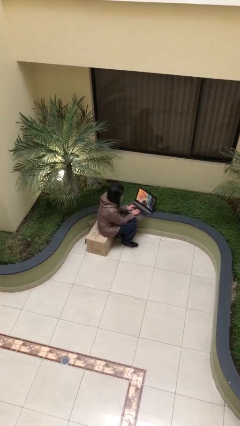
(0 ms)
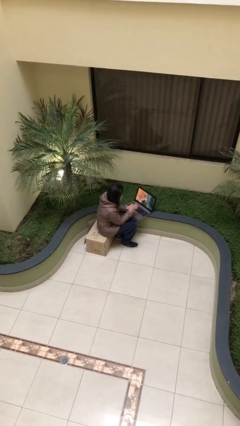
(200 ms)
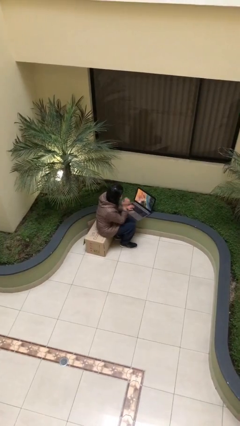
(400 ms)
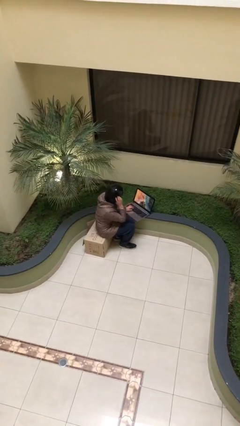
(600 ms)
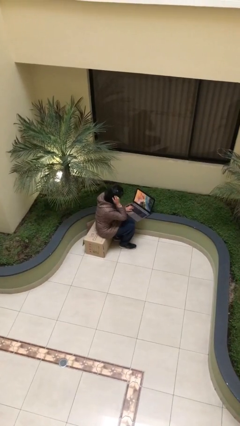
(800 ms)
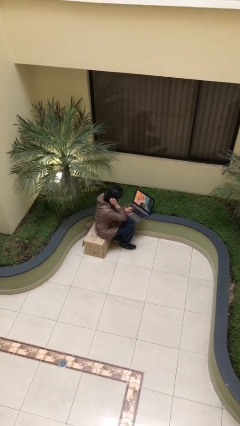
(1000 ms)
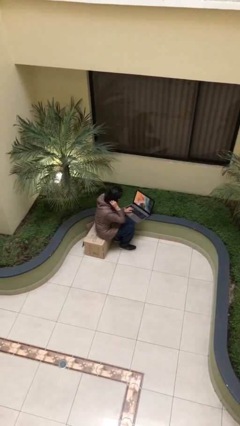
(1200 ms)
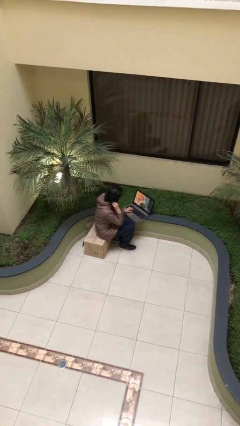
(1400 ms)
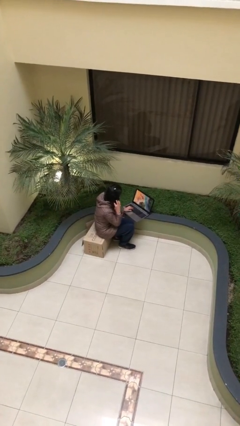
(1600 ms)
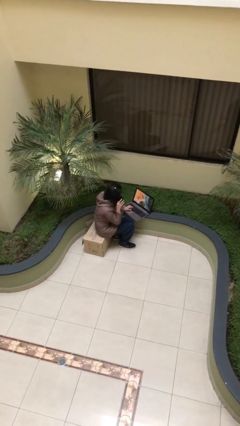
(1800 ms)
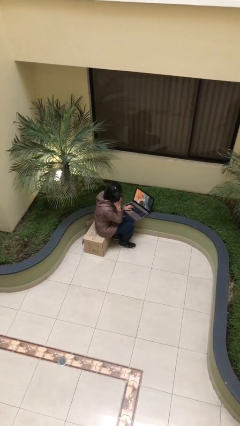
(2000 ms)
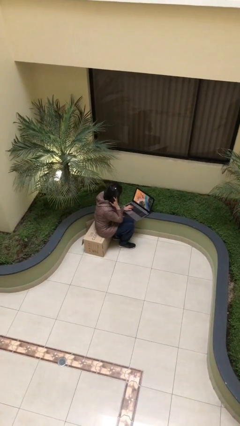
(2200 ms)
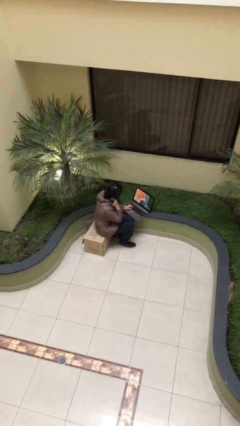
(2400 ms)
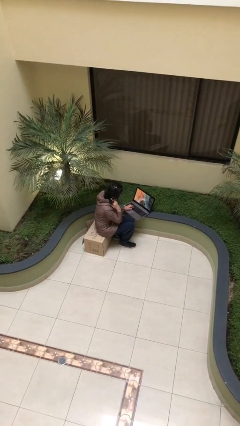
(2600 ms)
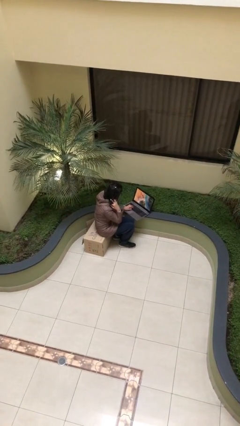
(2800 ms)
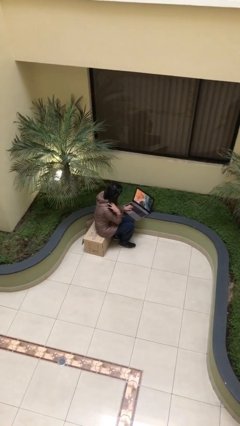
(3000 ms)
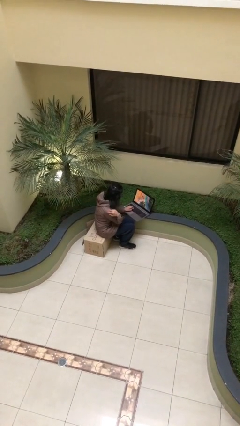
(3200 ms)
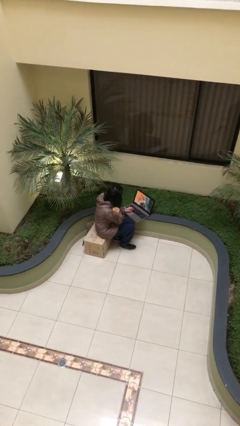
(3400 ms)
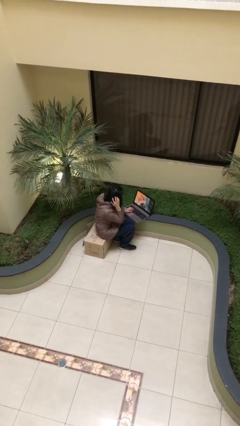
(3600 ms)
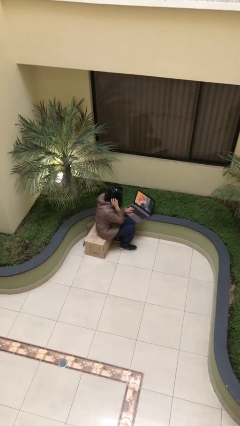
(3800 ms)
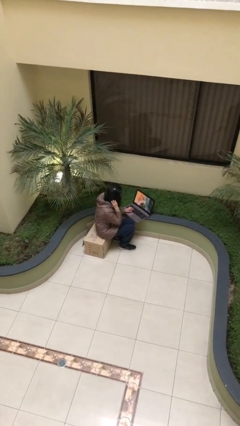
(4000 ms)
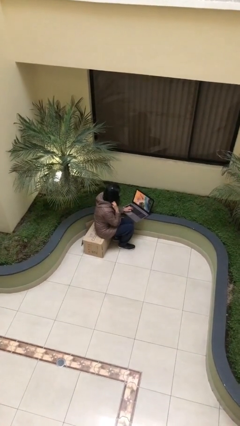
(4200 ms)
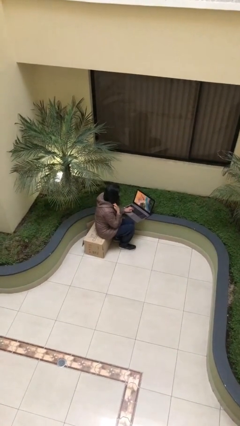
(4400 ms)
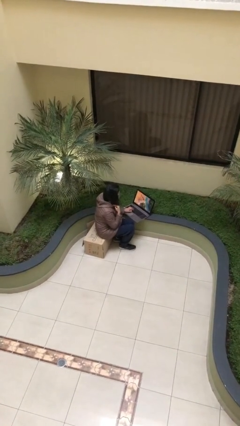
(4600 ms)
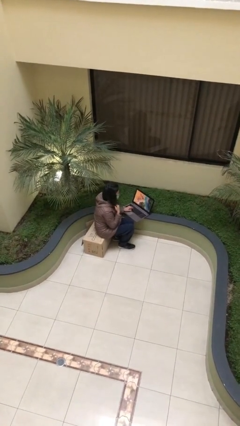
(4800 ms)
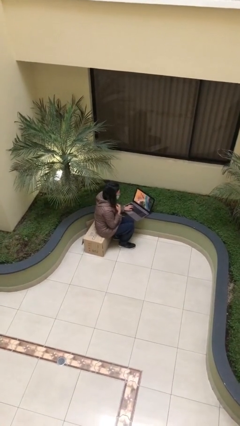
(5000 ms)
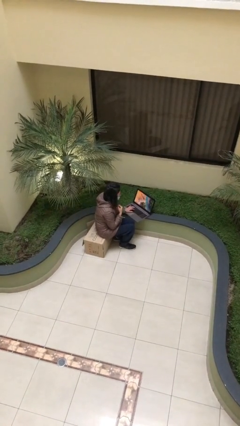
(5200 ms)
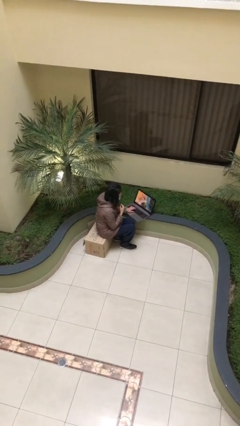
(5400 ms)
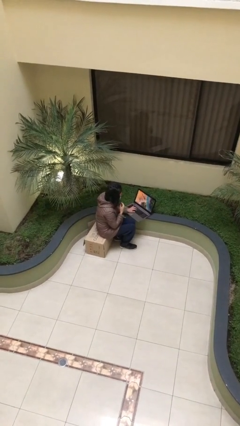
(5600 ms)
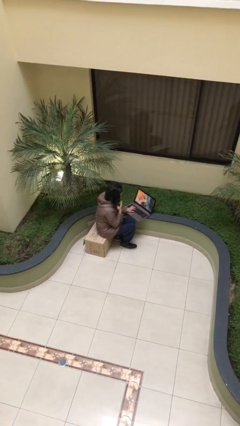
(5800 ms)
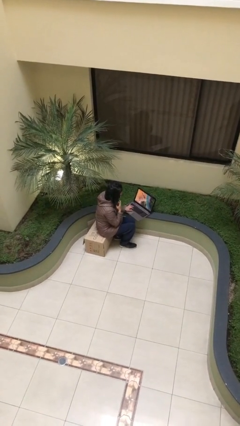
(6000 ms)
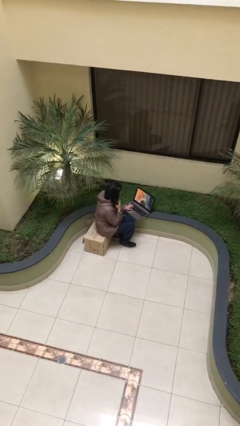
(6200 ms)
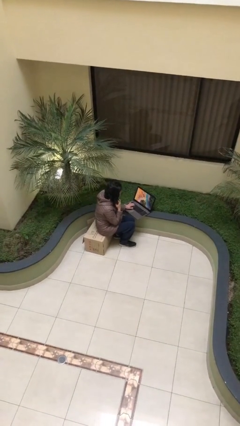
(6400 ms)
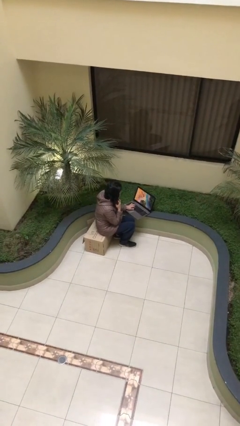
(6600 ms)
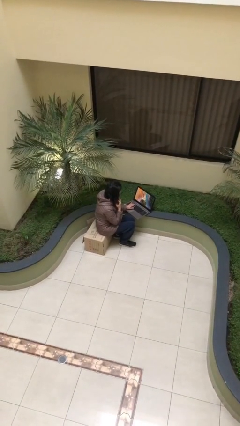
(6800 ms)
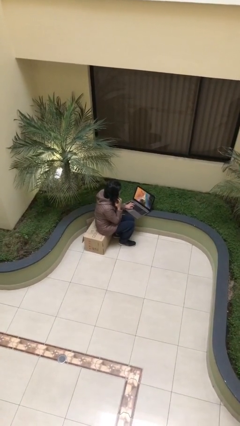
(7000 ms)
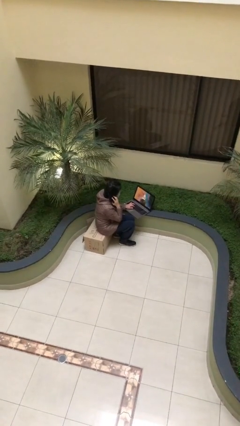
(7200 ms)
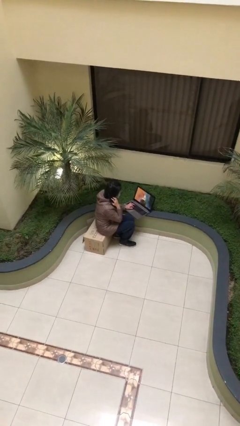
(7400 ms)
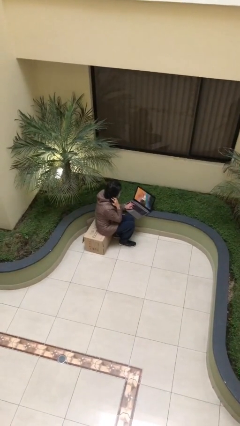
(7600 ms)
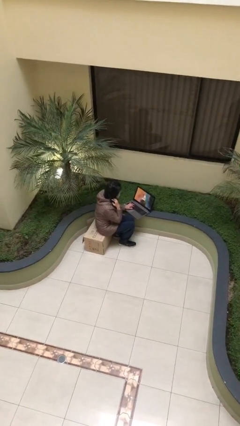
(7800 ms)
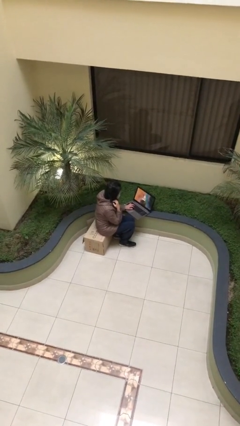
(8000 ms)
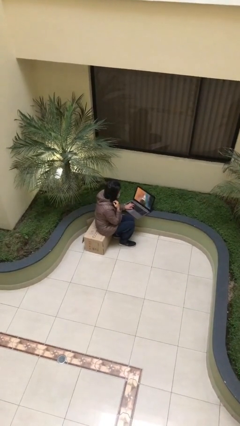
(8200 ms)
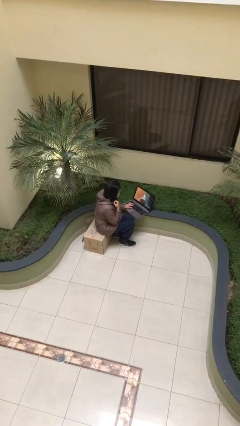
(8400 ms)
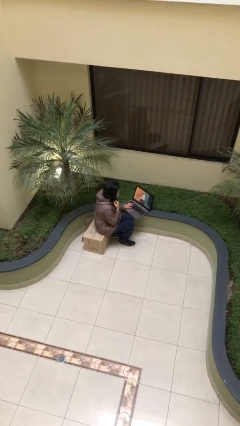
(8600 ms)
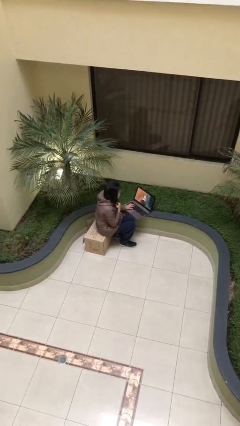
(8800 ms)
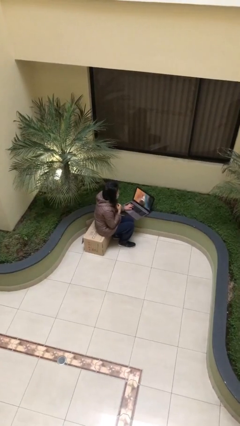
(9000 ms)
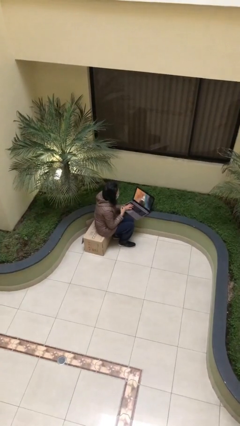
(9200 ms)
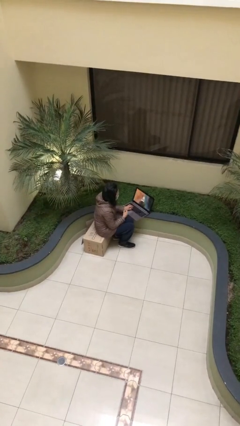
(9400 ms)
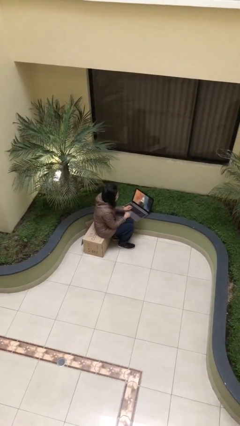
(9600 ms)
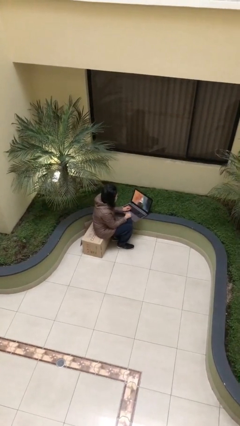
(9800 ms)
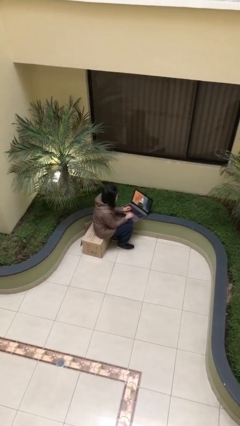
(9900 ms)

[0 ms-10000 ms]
person interacts with laptop

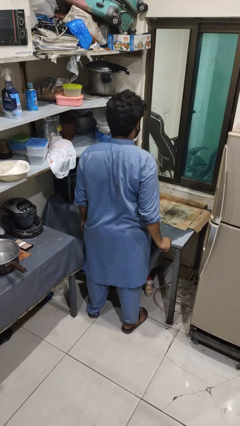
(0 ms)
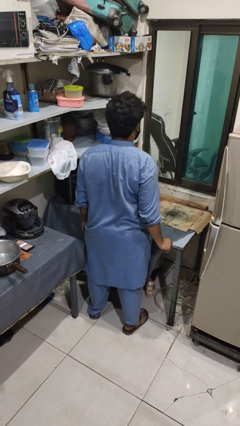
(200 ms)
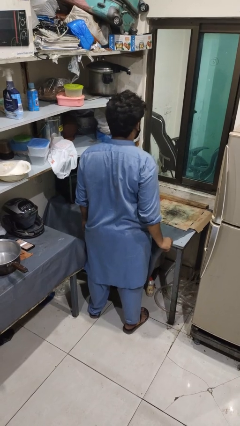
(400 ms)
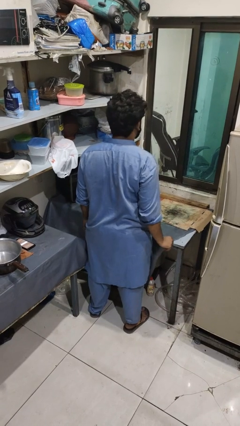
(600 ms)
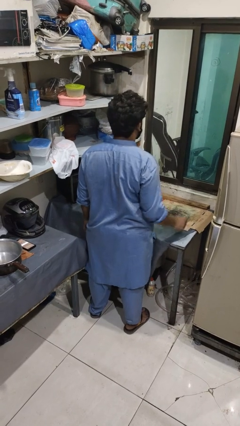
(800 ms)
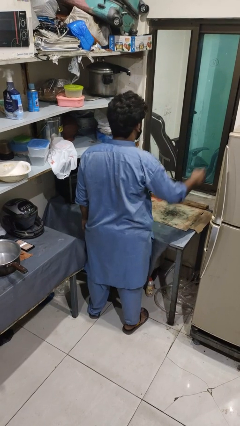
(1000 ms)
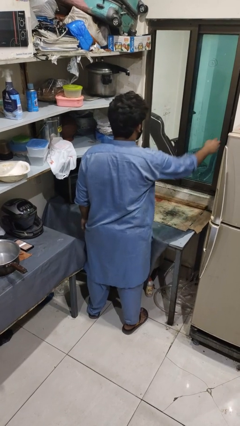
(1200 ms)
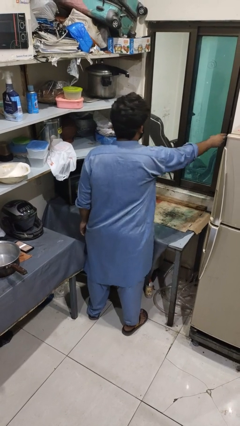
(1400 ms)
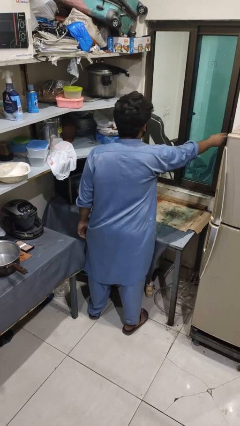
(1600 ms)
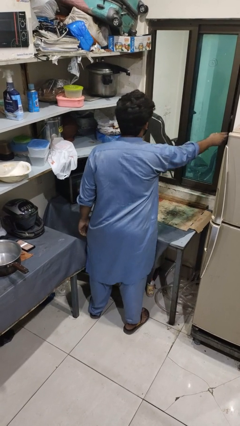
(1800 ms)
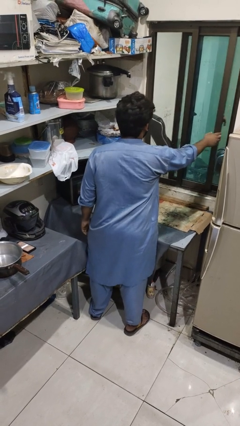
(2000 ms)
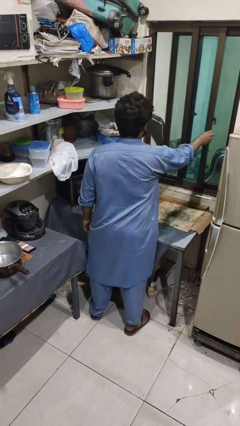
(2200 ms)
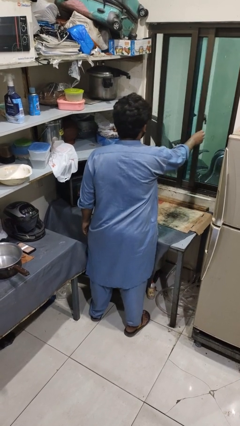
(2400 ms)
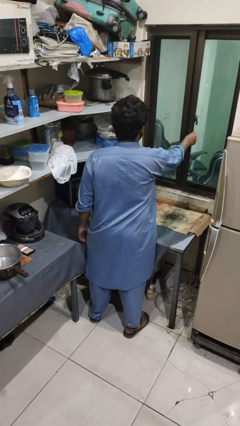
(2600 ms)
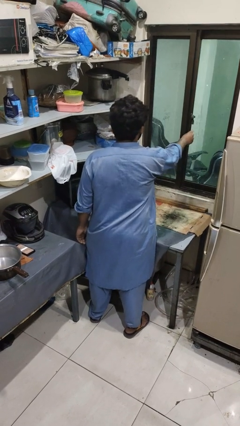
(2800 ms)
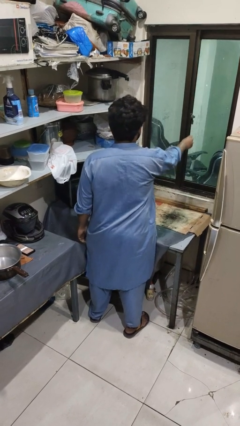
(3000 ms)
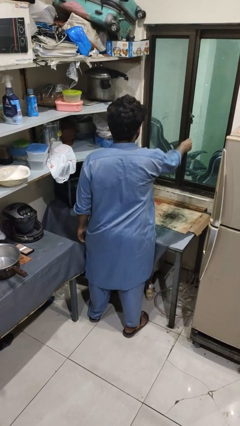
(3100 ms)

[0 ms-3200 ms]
person closes home window

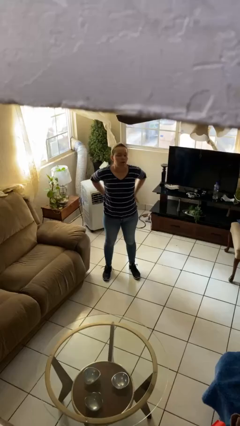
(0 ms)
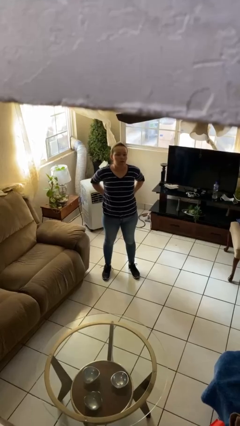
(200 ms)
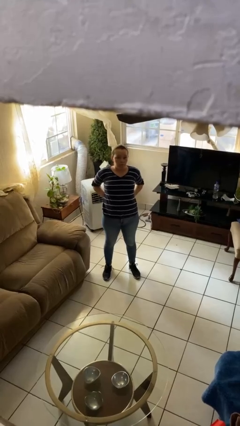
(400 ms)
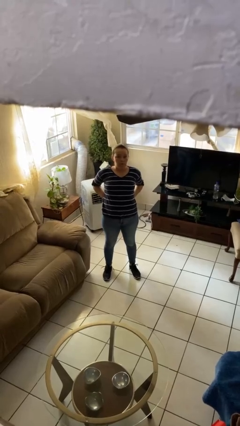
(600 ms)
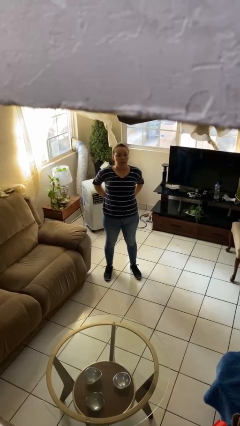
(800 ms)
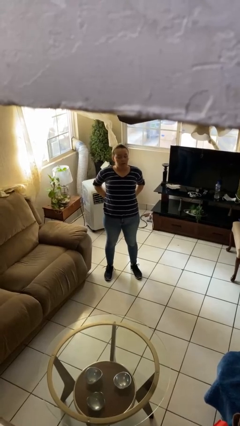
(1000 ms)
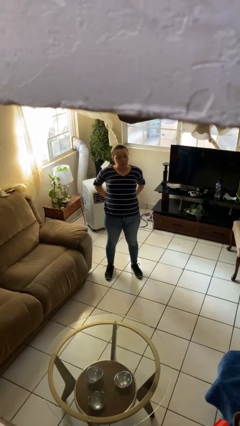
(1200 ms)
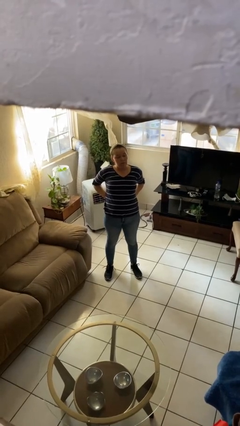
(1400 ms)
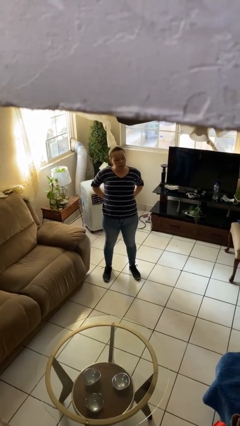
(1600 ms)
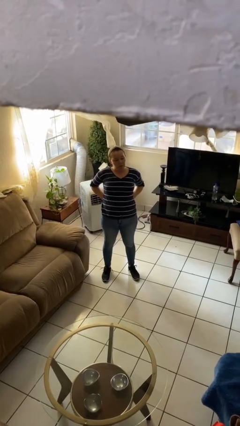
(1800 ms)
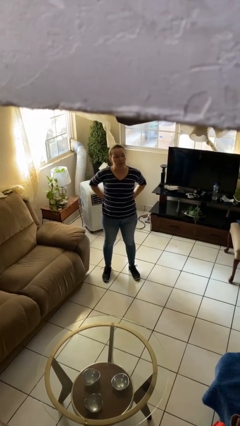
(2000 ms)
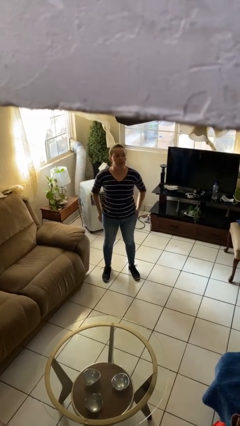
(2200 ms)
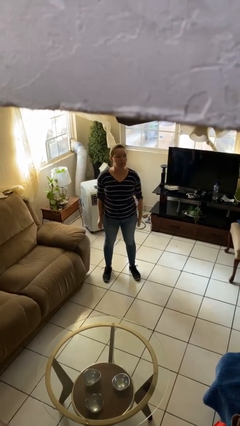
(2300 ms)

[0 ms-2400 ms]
person stretches back

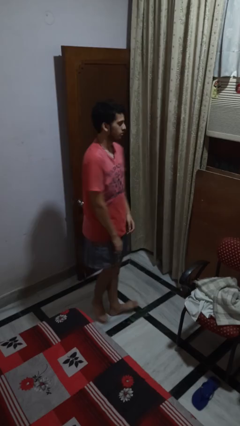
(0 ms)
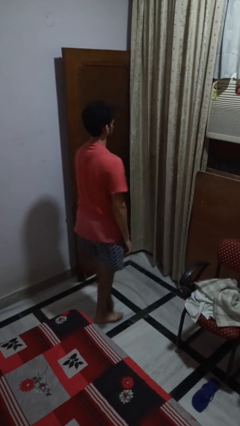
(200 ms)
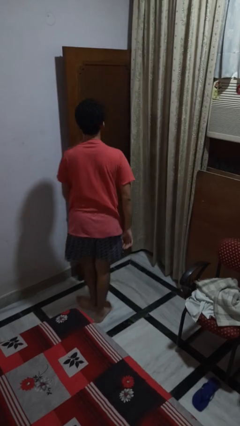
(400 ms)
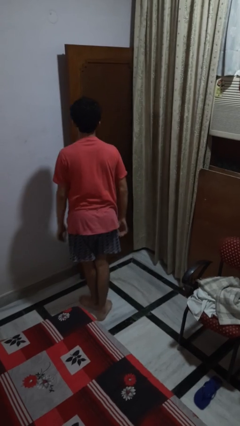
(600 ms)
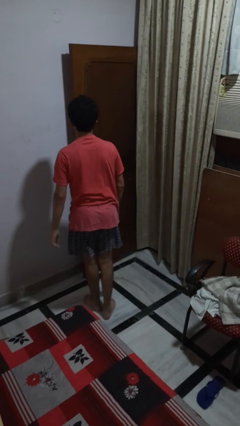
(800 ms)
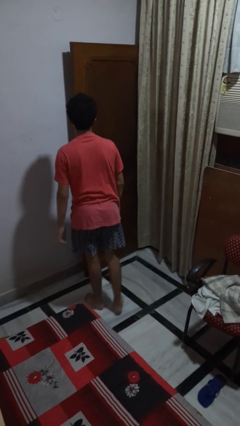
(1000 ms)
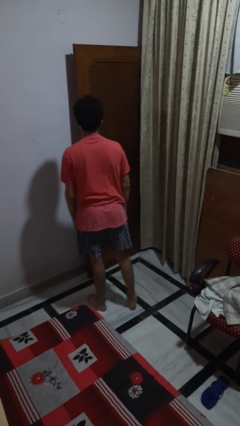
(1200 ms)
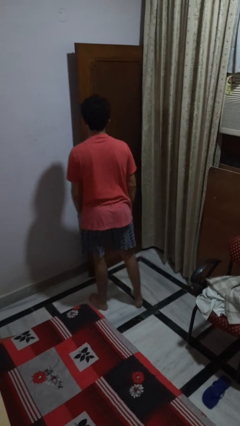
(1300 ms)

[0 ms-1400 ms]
person twirls

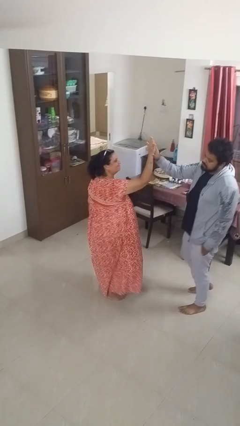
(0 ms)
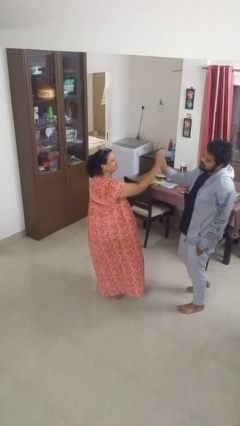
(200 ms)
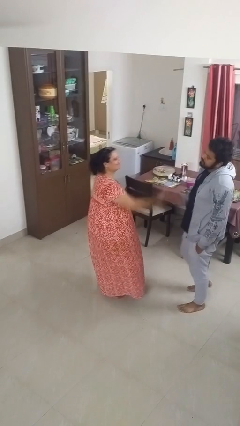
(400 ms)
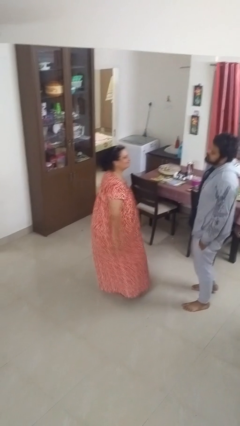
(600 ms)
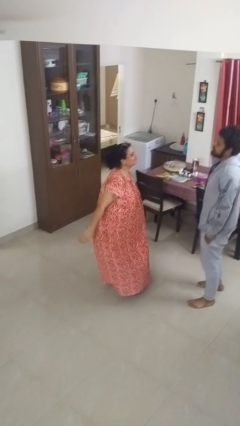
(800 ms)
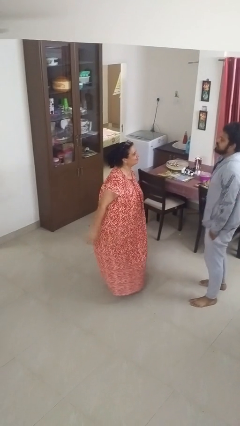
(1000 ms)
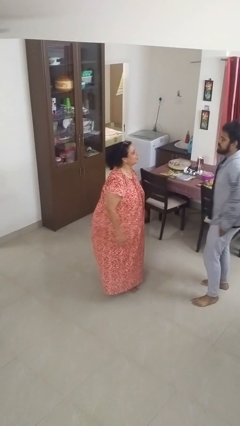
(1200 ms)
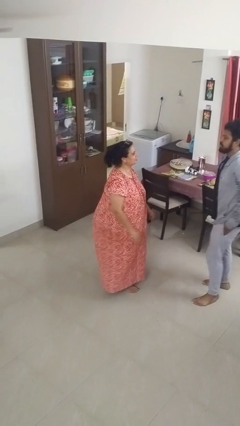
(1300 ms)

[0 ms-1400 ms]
person highfives hand
